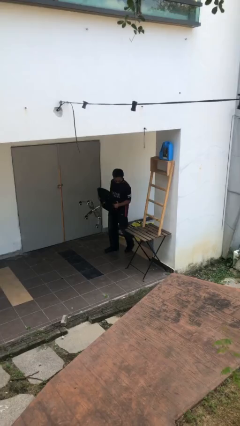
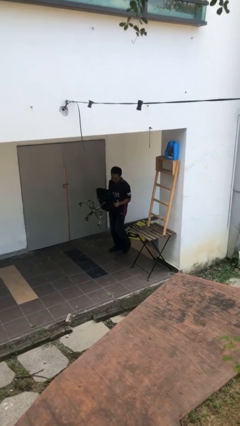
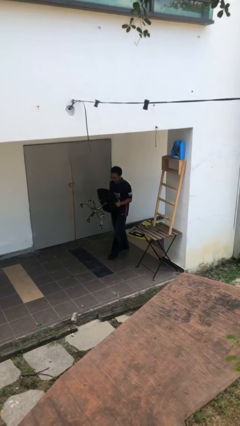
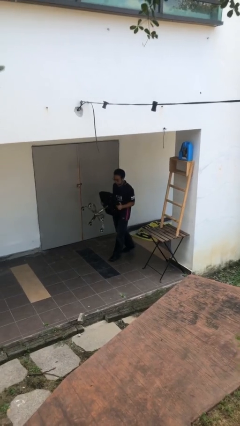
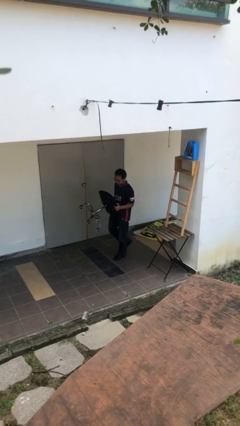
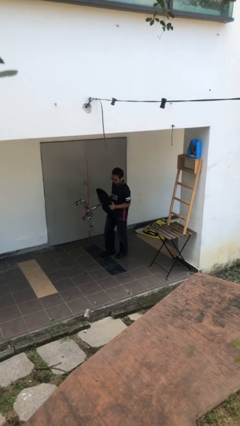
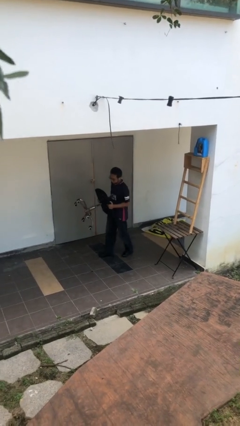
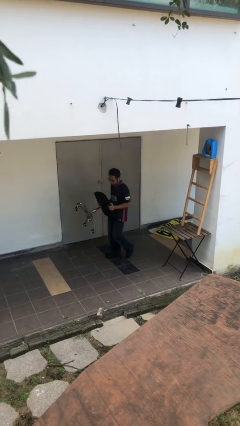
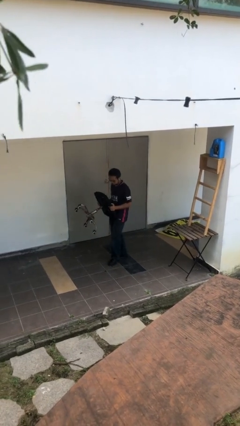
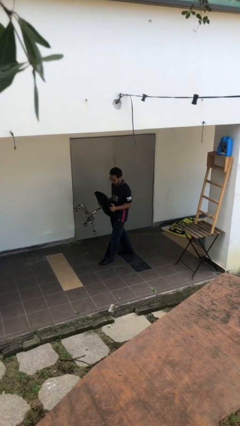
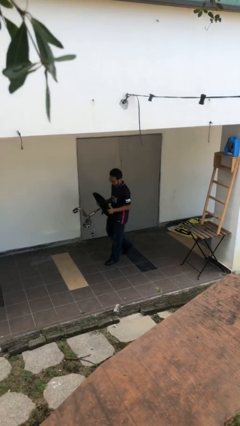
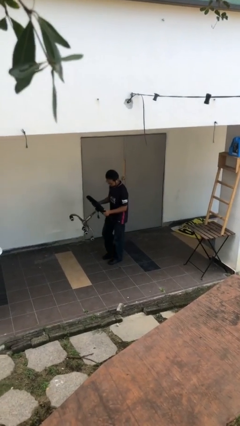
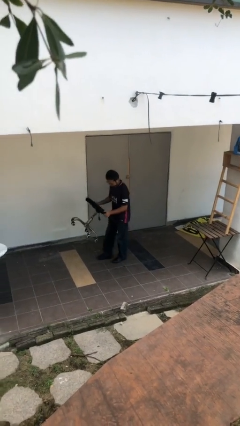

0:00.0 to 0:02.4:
person carries heavy object

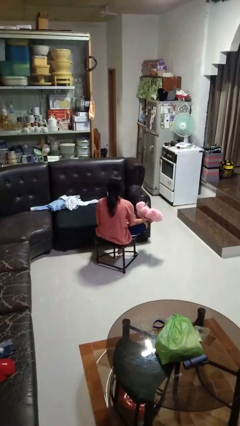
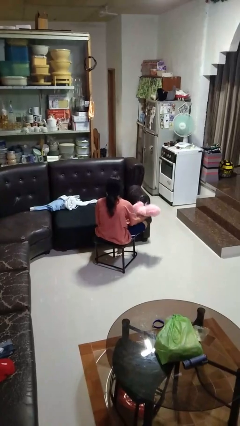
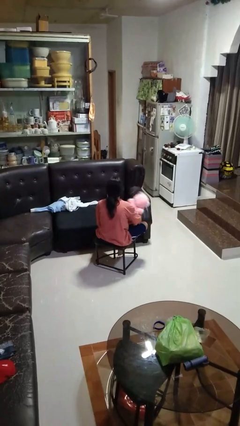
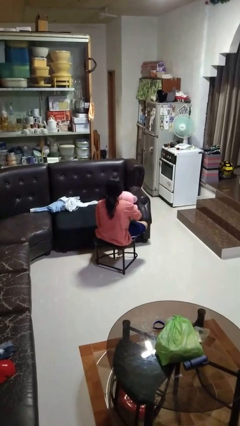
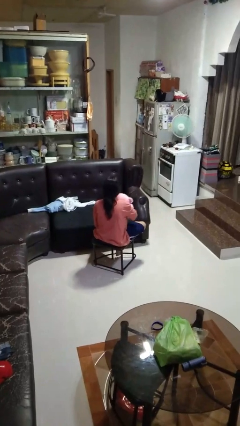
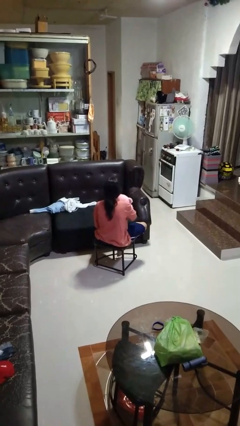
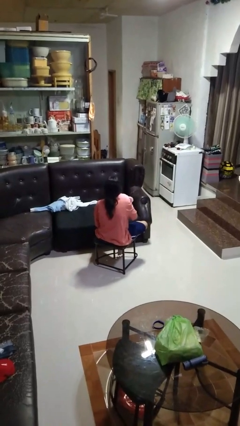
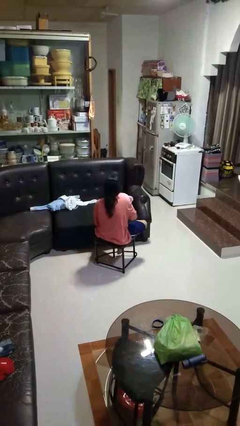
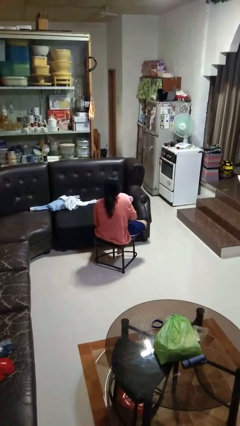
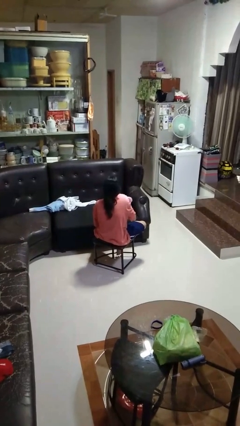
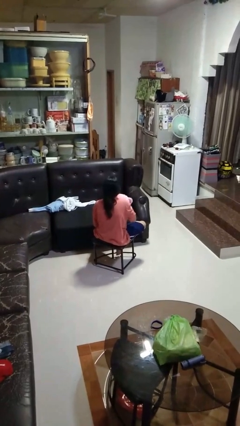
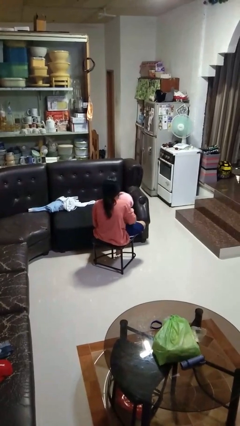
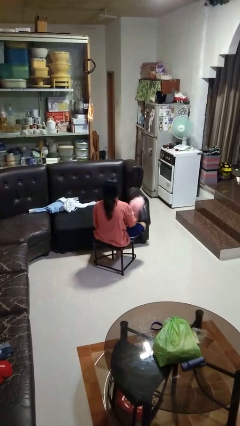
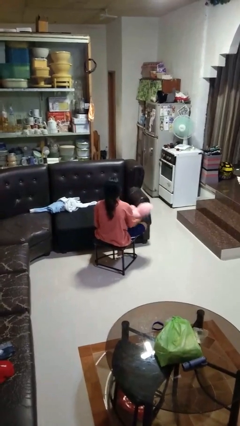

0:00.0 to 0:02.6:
person hugs stuffed animal

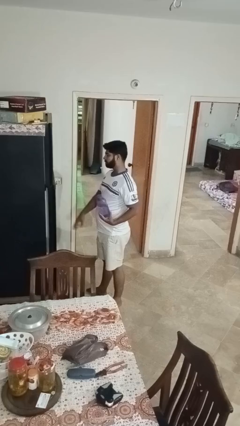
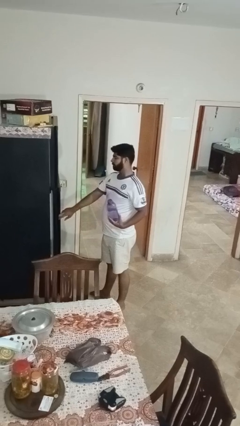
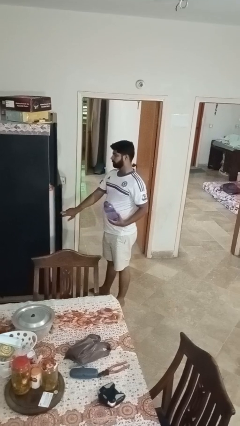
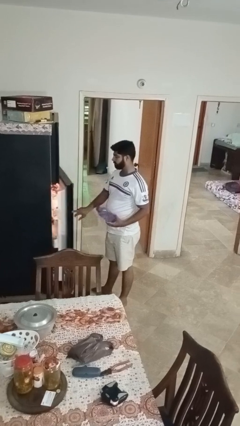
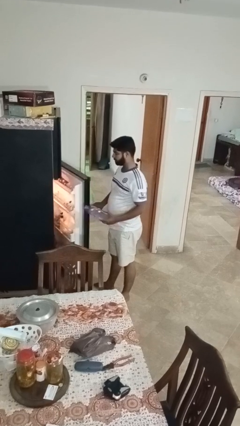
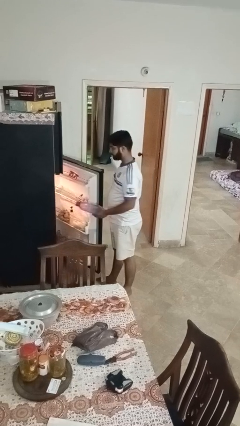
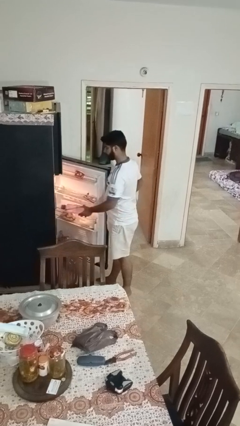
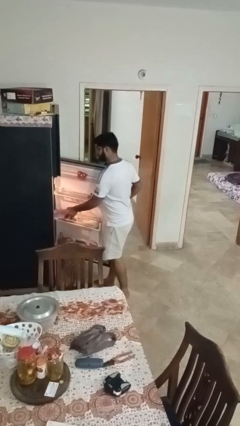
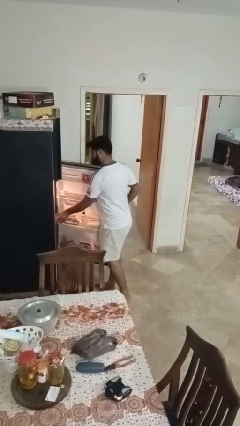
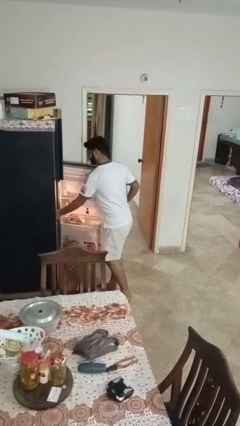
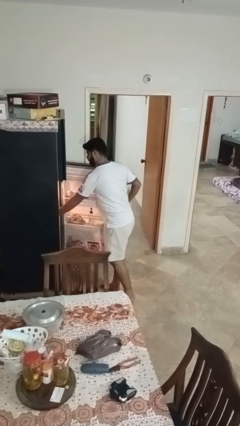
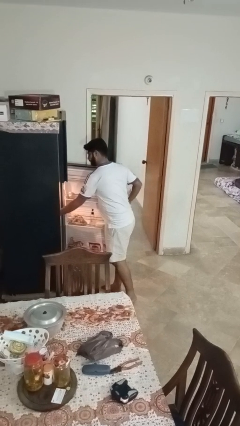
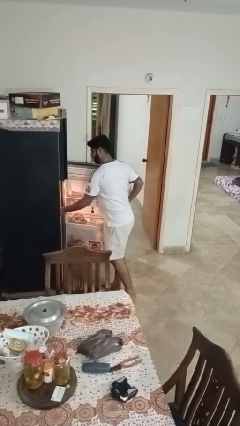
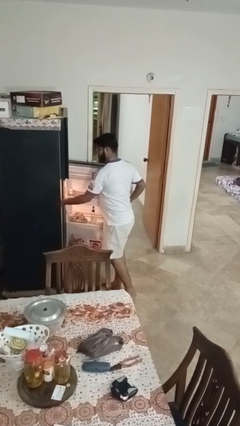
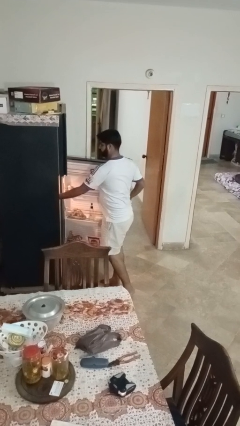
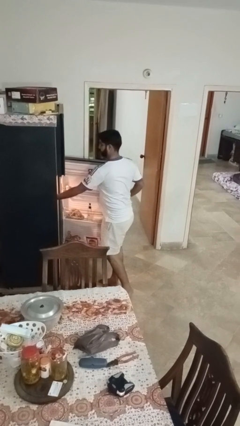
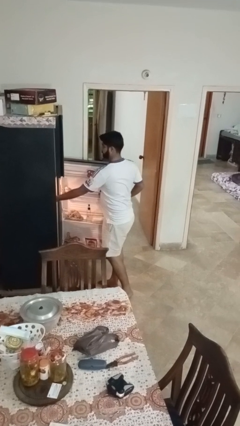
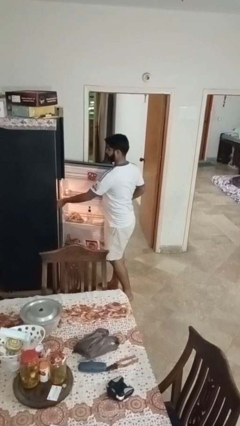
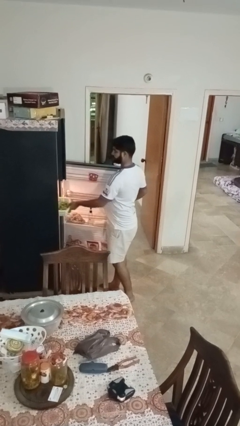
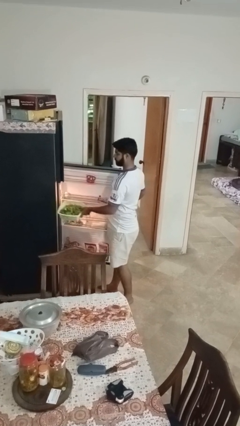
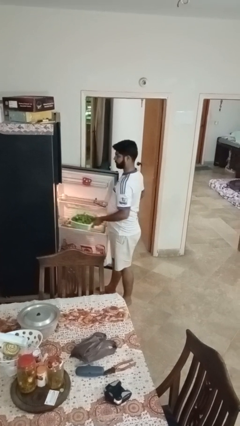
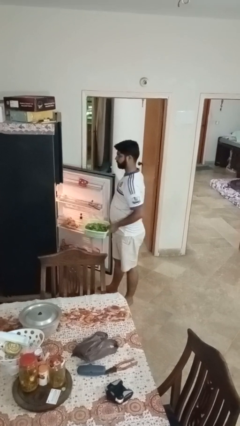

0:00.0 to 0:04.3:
person puts object into refrigerator

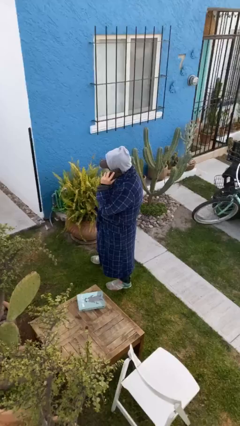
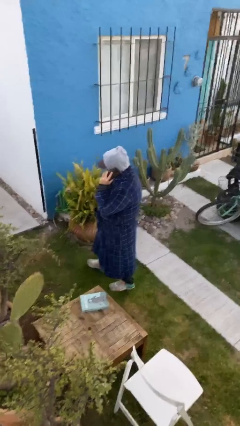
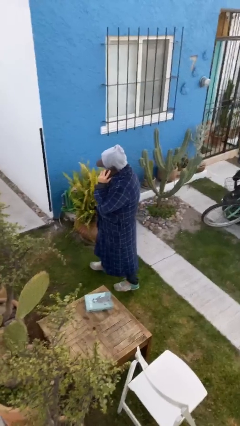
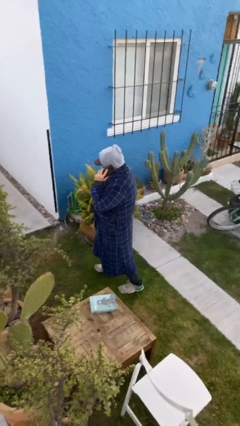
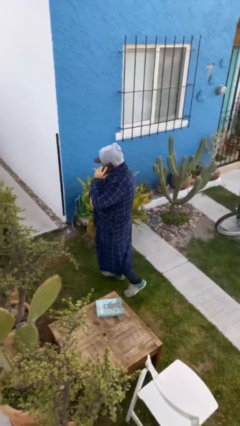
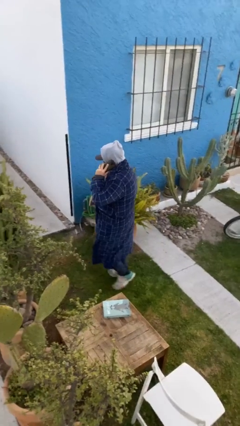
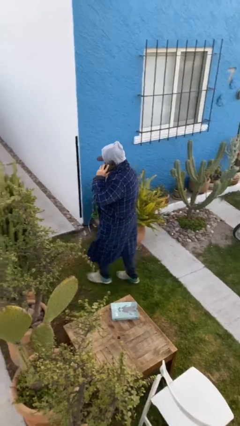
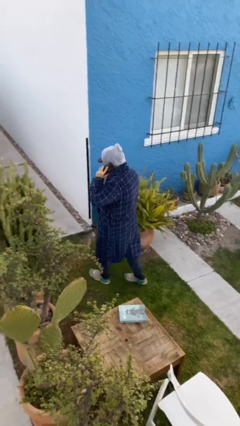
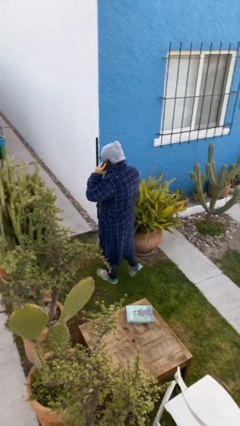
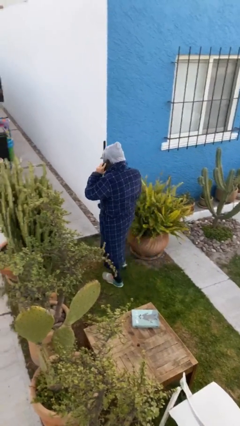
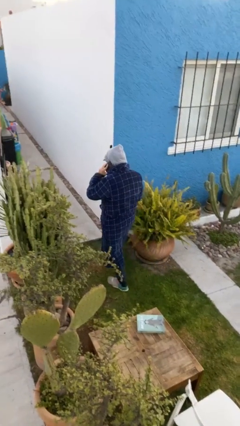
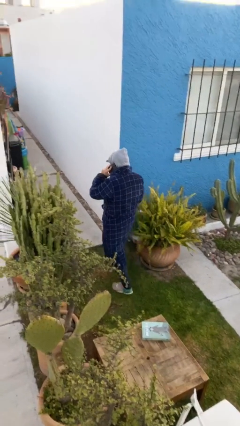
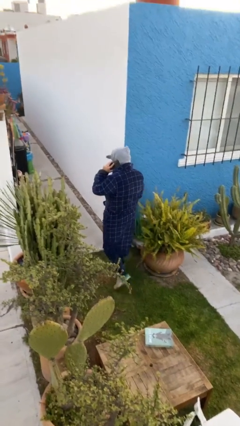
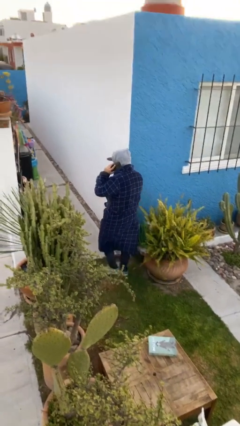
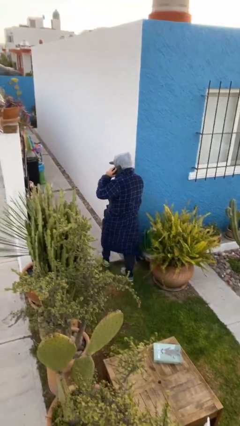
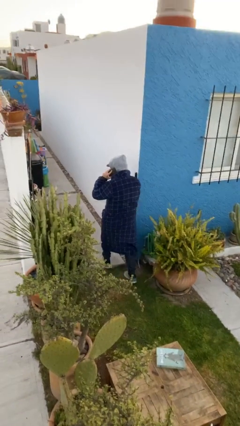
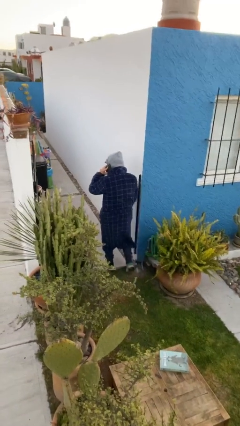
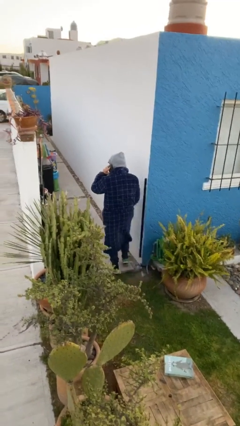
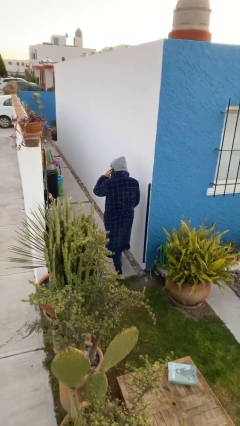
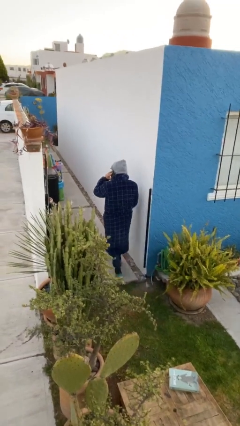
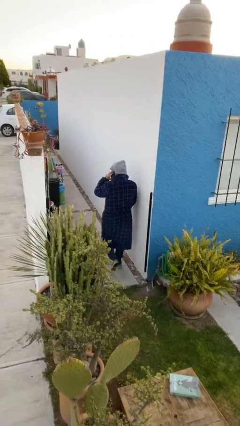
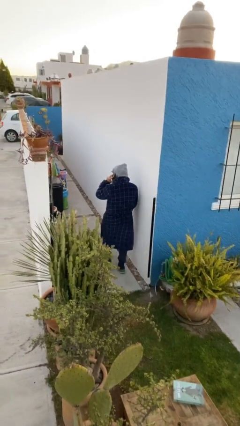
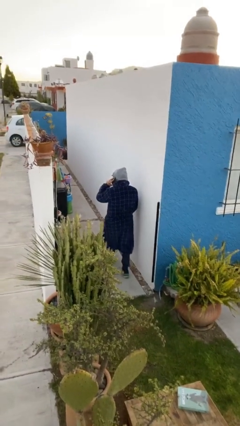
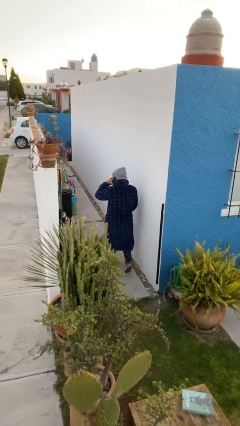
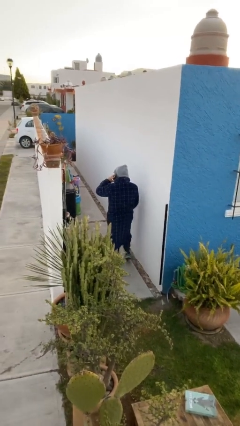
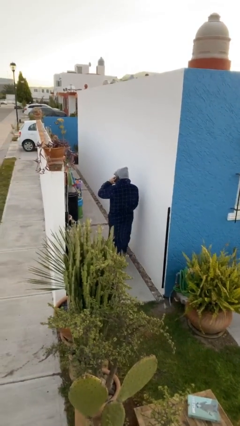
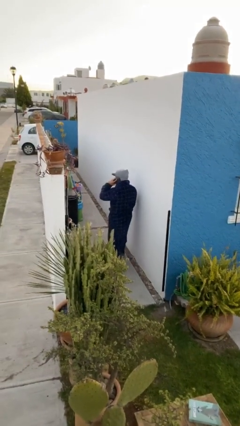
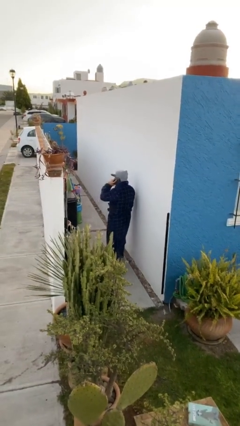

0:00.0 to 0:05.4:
person exits scene through structure

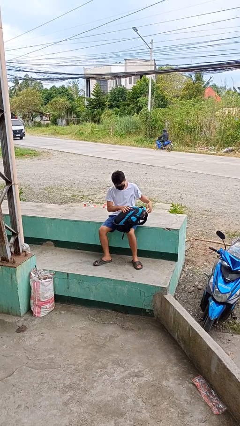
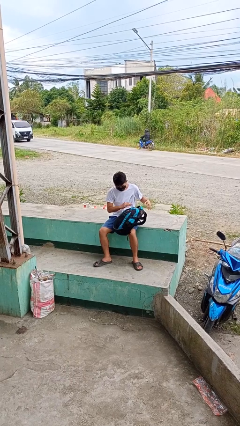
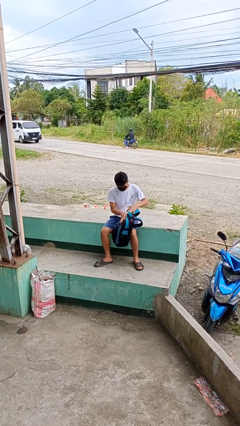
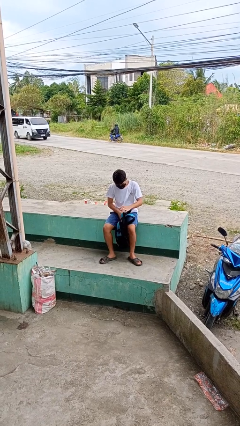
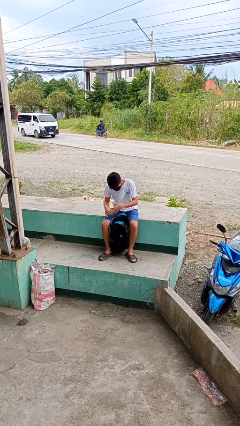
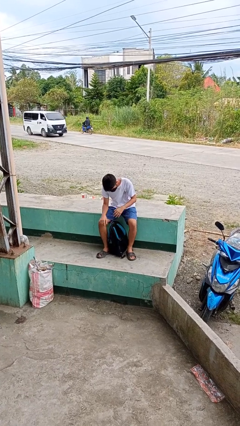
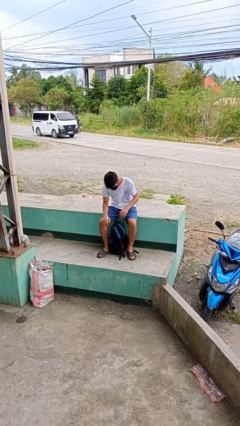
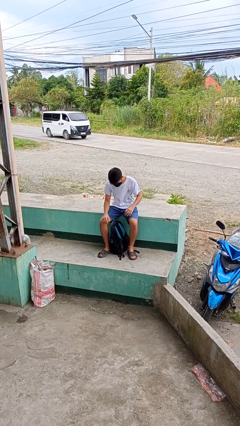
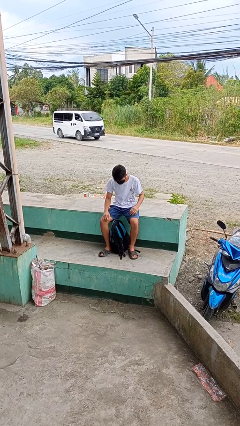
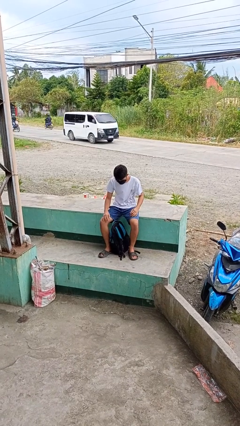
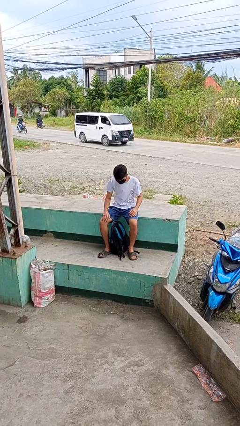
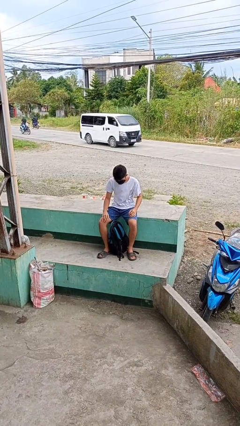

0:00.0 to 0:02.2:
person drops object

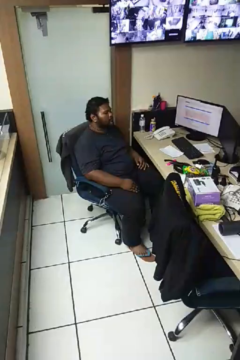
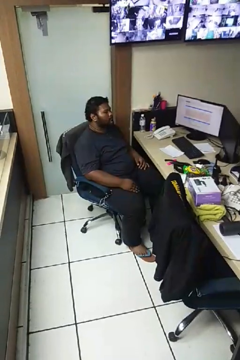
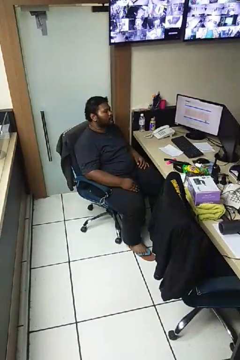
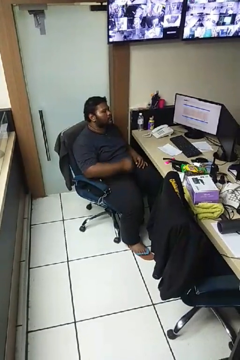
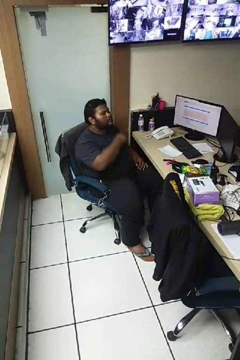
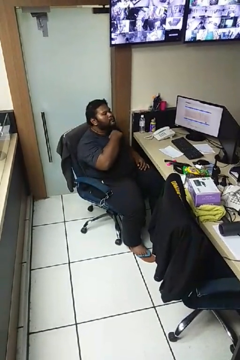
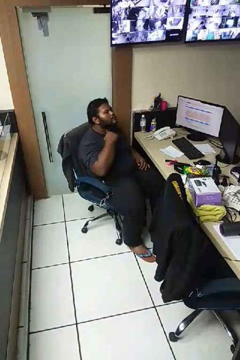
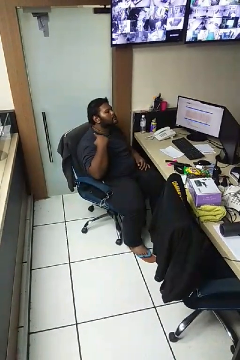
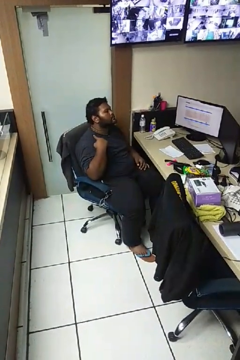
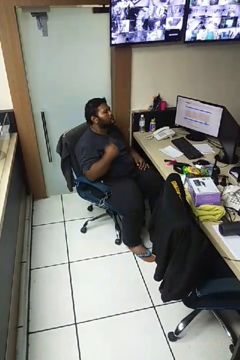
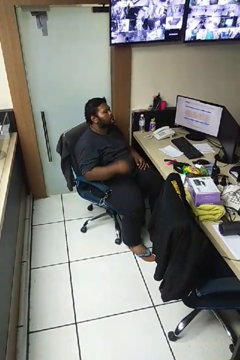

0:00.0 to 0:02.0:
person gestures cut
